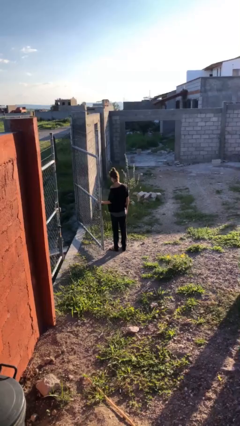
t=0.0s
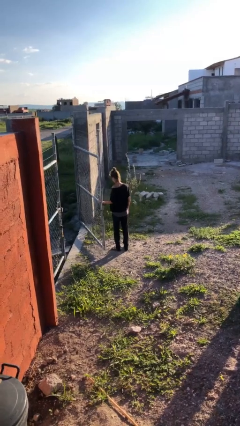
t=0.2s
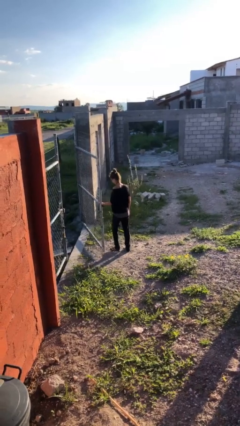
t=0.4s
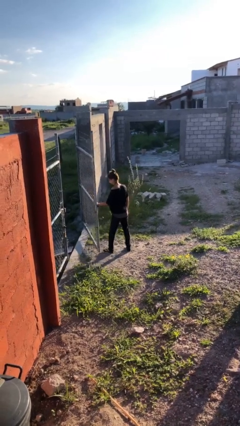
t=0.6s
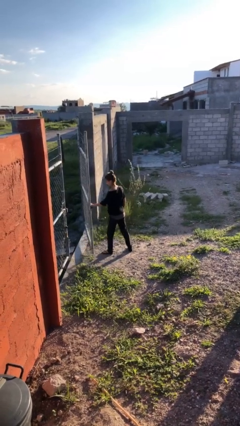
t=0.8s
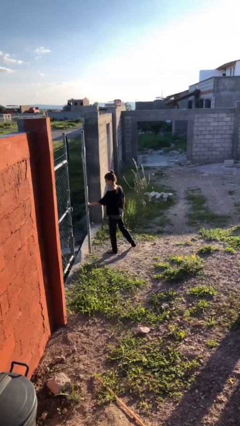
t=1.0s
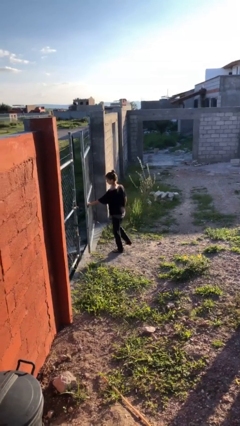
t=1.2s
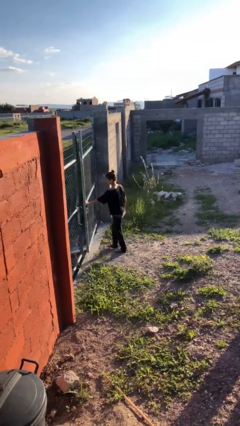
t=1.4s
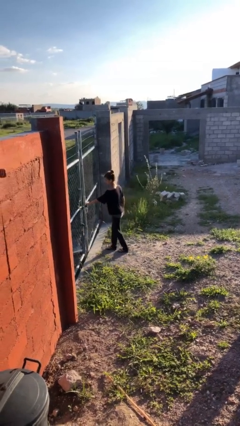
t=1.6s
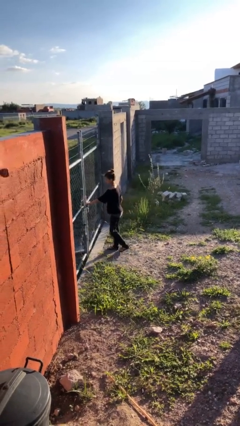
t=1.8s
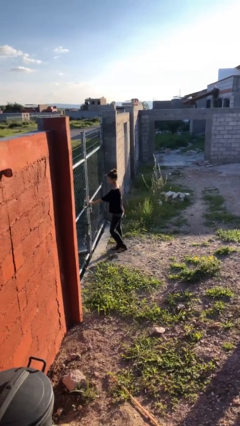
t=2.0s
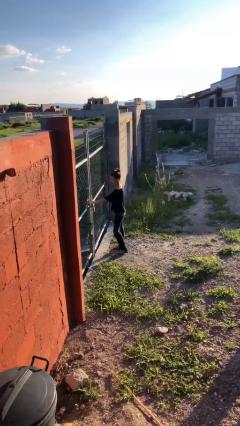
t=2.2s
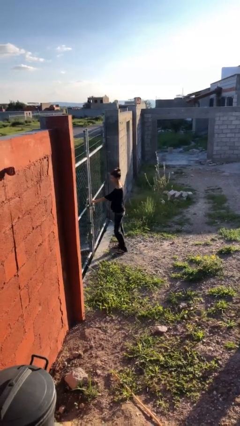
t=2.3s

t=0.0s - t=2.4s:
person closes gate

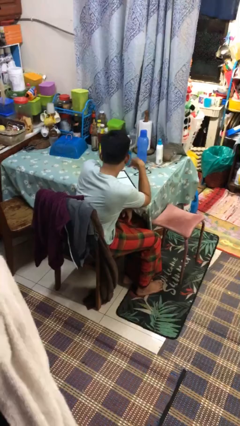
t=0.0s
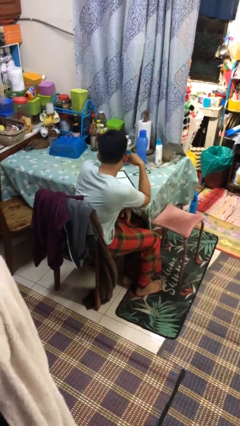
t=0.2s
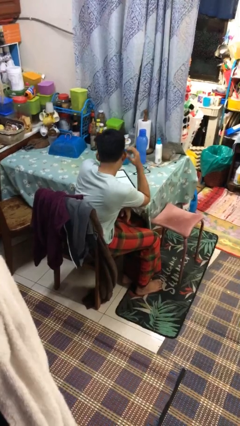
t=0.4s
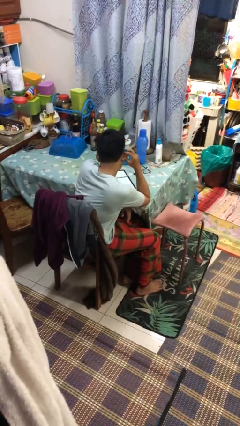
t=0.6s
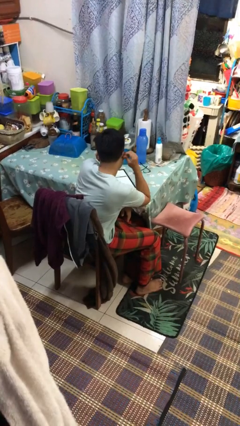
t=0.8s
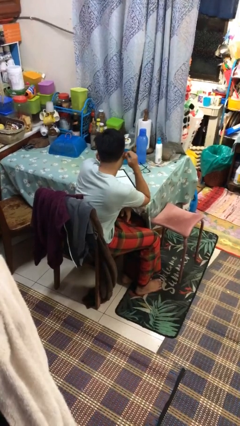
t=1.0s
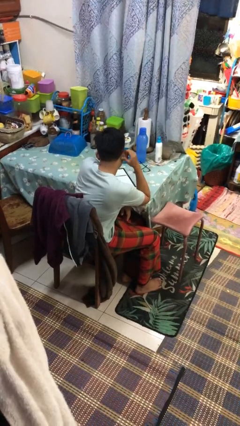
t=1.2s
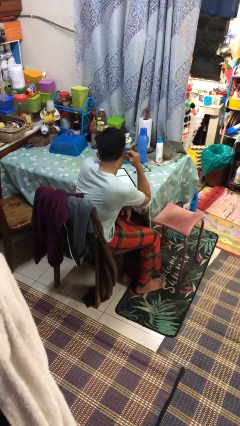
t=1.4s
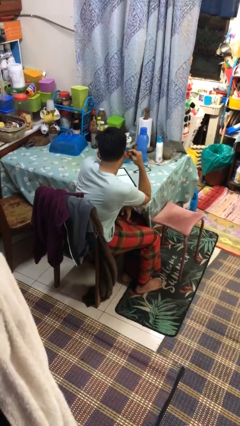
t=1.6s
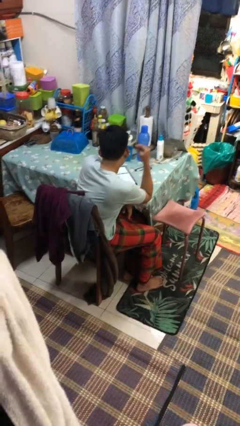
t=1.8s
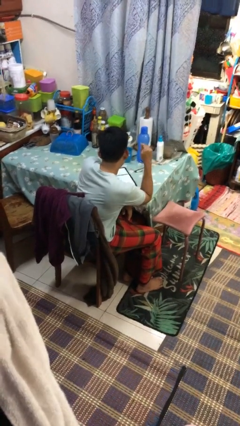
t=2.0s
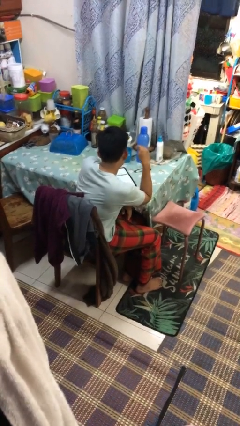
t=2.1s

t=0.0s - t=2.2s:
person touches earlobe

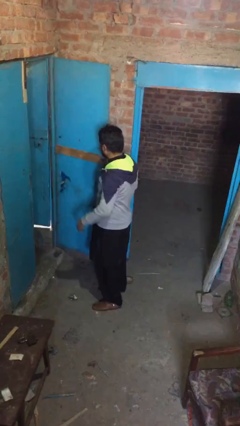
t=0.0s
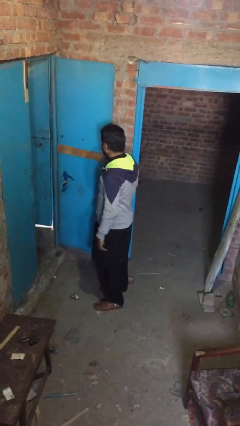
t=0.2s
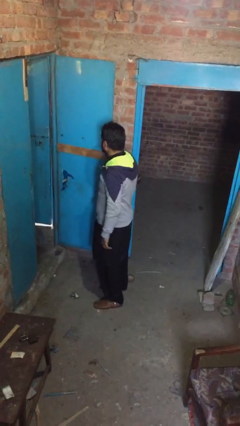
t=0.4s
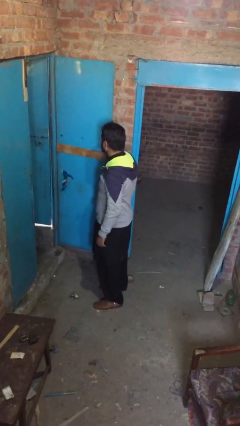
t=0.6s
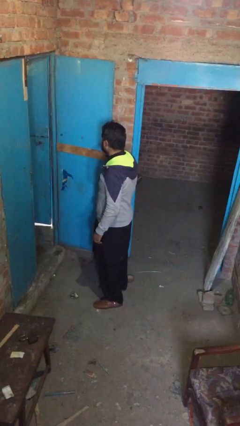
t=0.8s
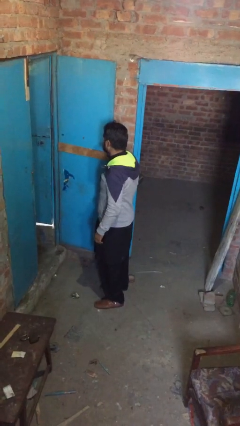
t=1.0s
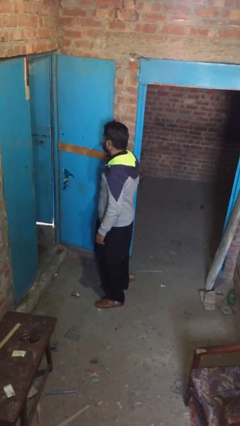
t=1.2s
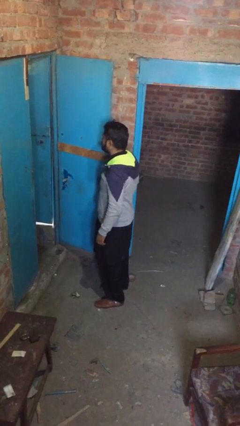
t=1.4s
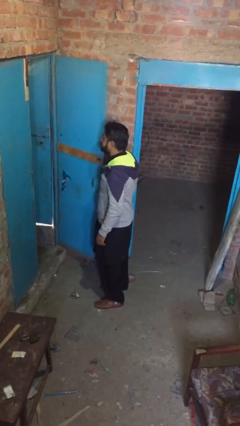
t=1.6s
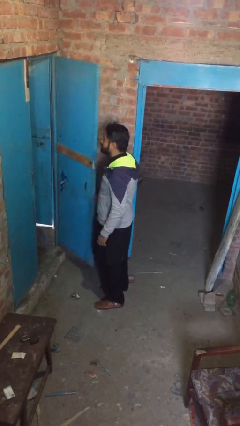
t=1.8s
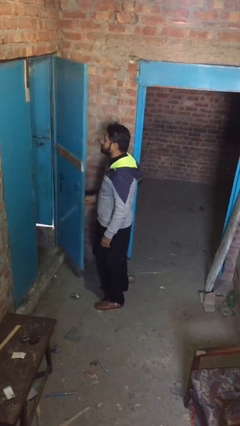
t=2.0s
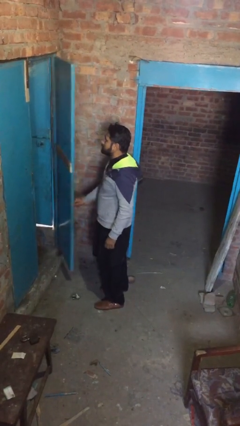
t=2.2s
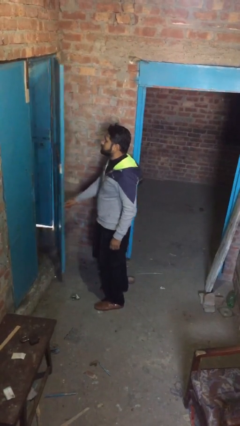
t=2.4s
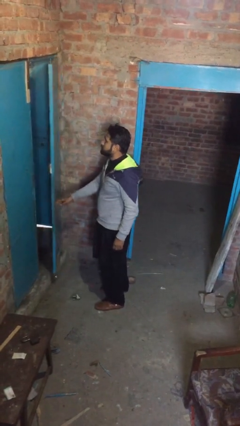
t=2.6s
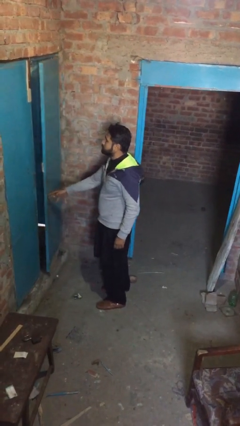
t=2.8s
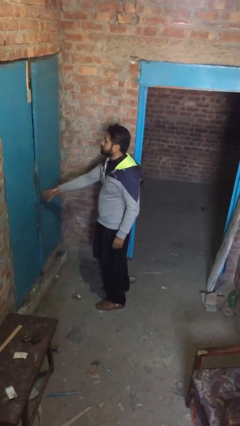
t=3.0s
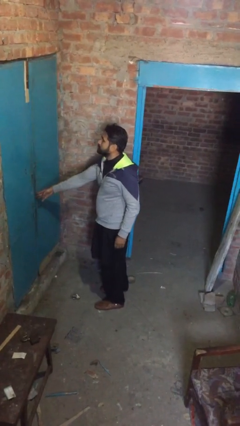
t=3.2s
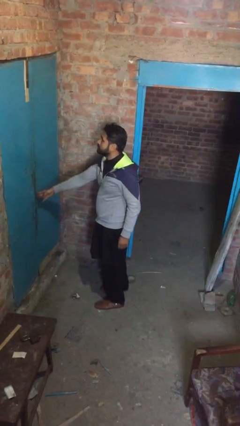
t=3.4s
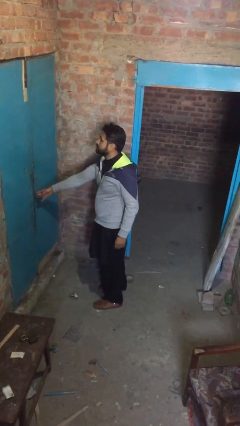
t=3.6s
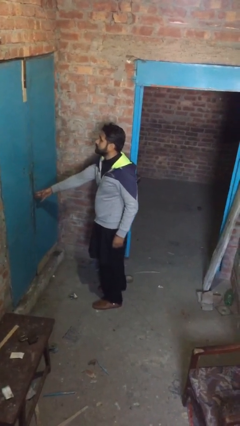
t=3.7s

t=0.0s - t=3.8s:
person closes facility door

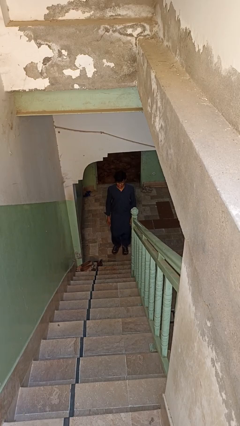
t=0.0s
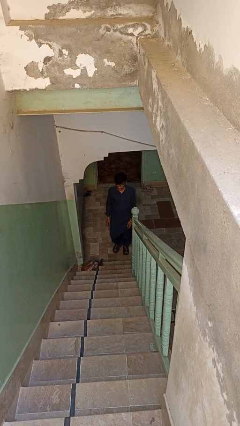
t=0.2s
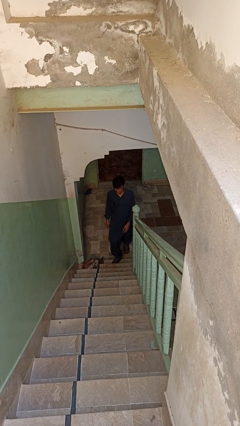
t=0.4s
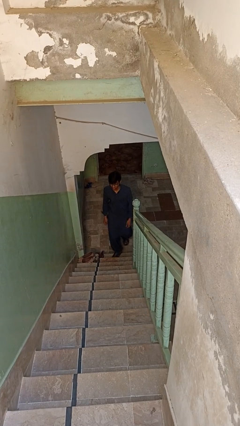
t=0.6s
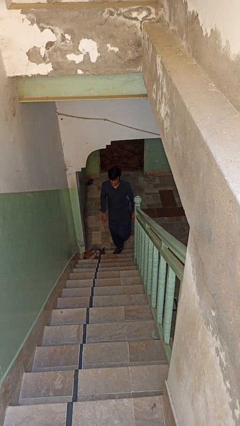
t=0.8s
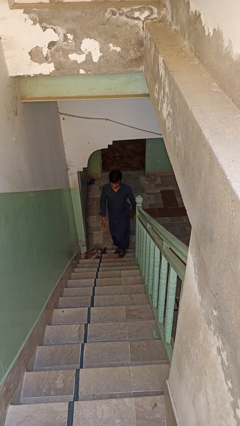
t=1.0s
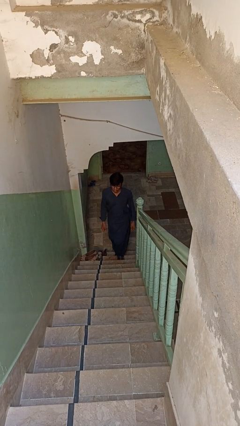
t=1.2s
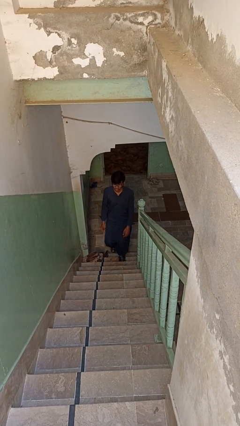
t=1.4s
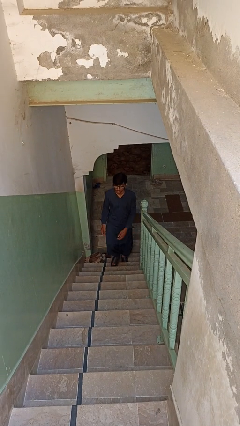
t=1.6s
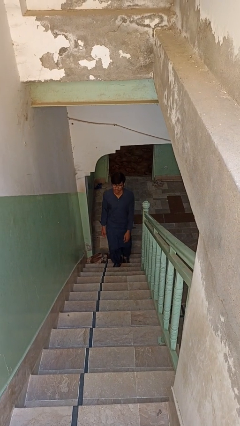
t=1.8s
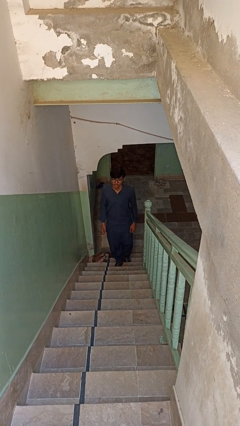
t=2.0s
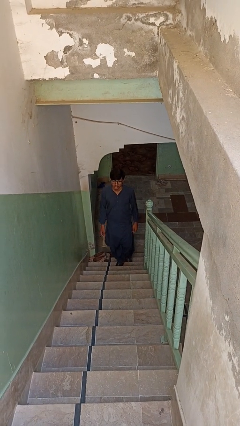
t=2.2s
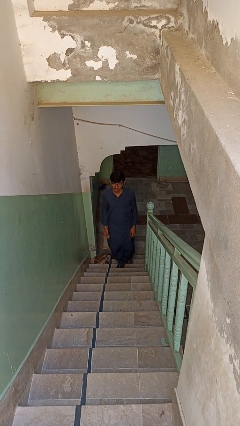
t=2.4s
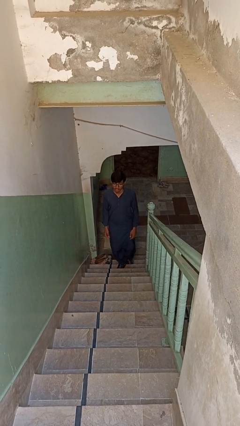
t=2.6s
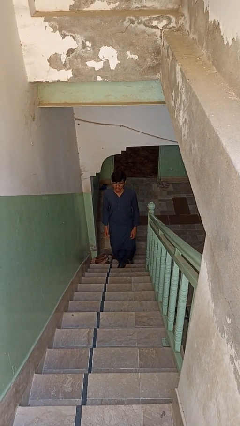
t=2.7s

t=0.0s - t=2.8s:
person climbs up stairs

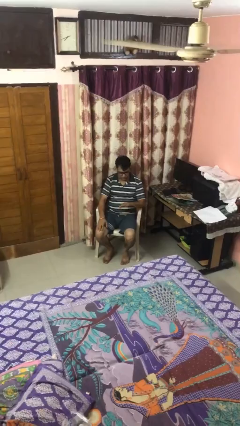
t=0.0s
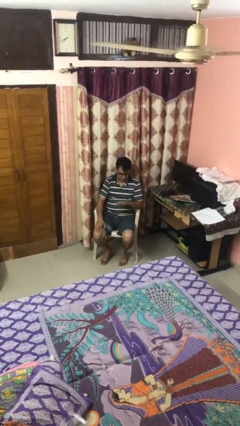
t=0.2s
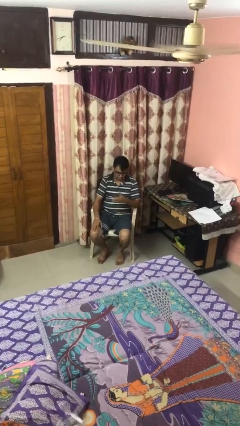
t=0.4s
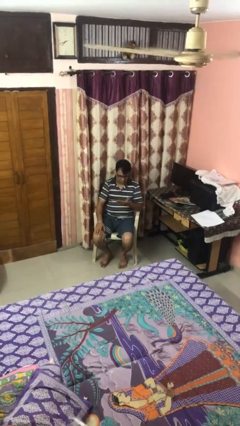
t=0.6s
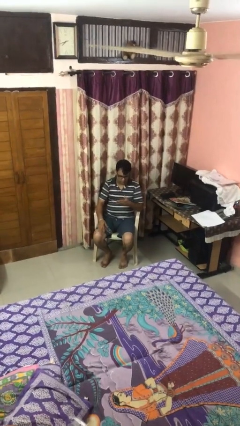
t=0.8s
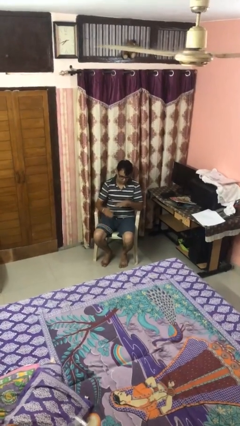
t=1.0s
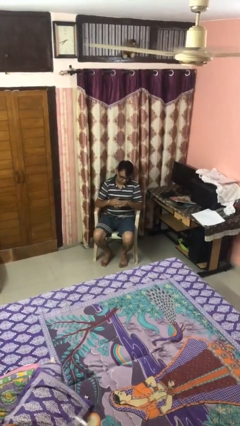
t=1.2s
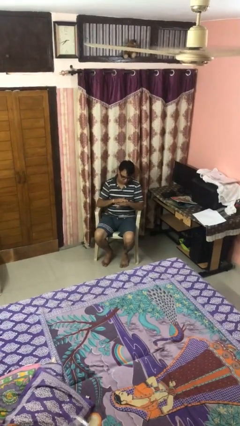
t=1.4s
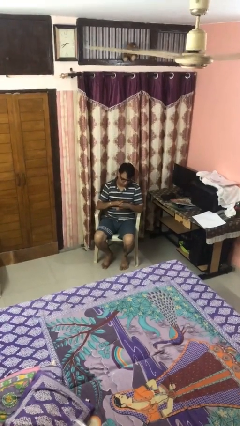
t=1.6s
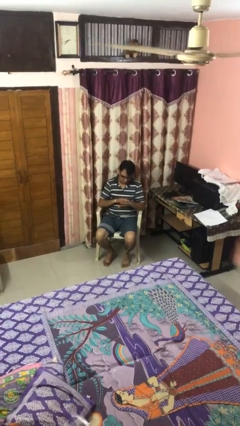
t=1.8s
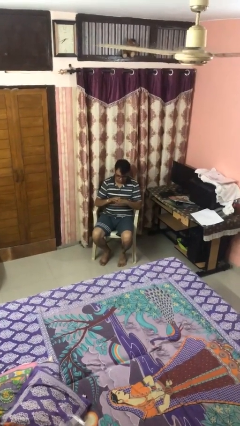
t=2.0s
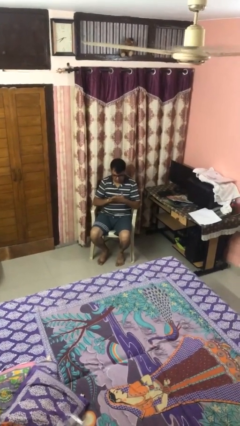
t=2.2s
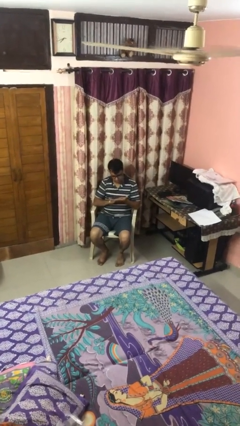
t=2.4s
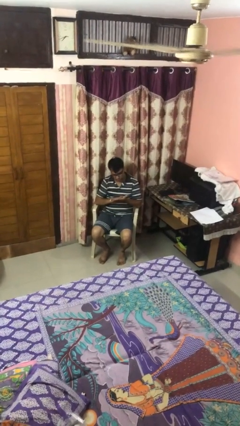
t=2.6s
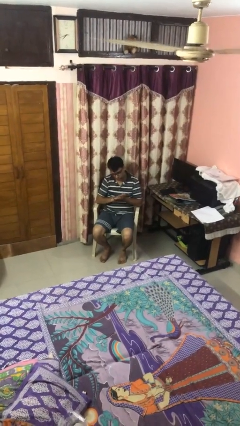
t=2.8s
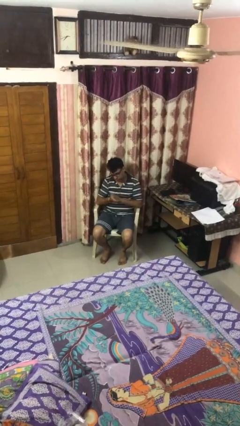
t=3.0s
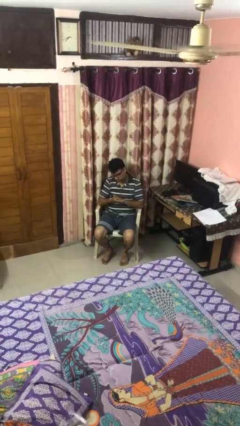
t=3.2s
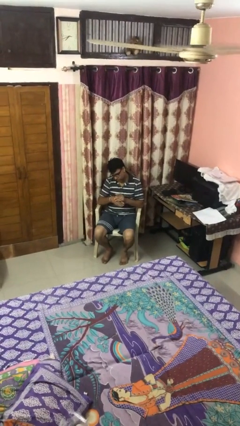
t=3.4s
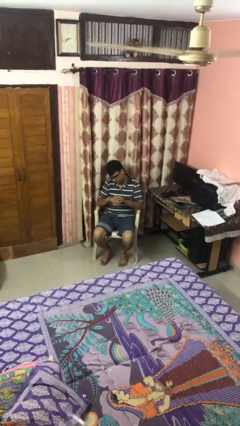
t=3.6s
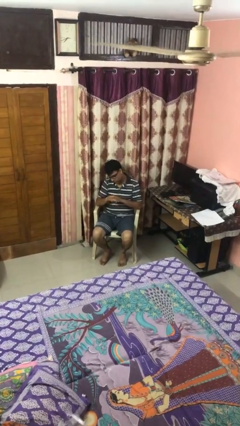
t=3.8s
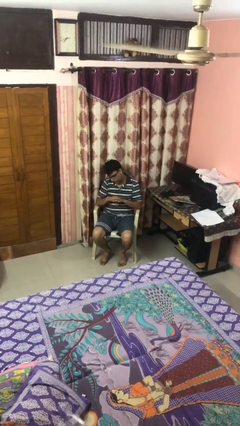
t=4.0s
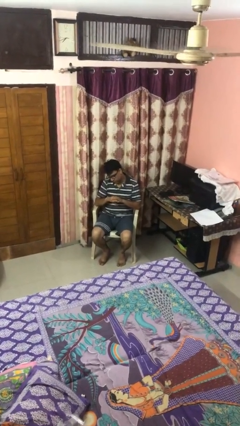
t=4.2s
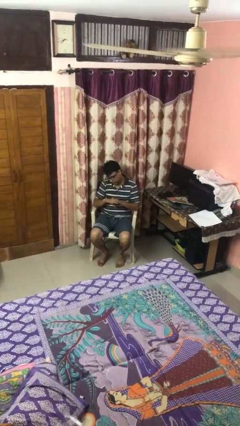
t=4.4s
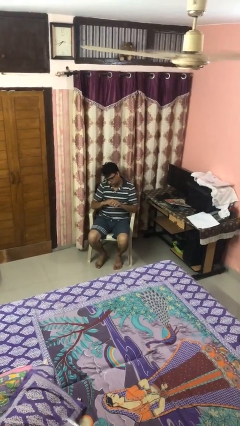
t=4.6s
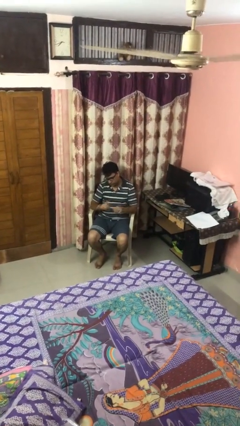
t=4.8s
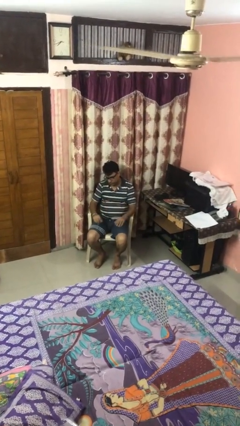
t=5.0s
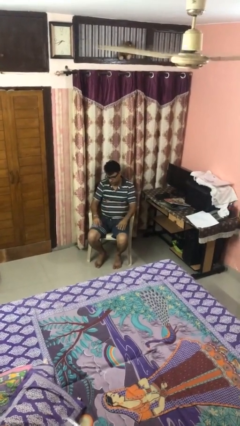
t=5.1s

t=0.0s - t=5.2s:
person looks at hands in lap

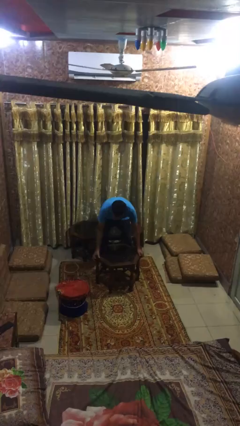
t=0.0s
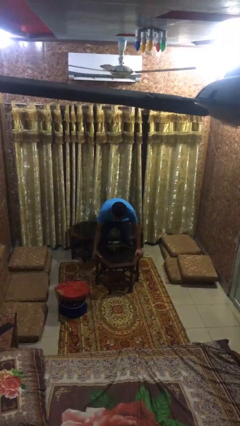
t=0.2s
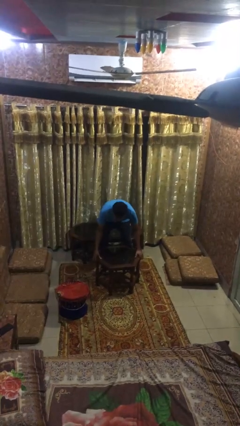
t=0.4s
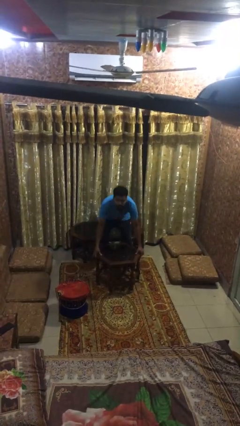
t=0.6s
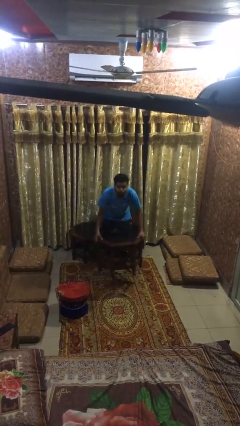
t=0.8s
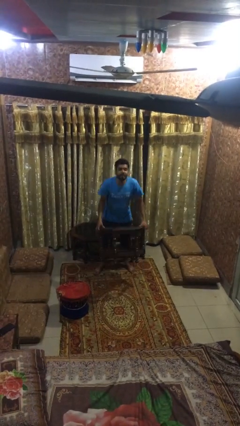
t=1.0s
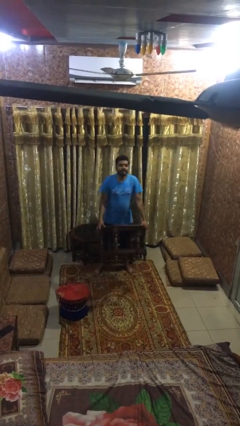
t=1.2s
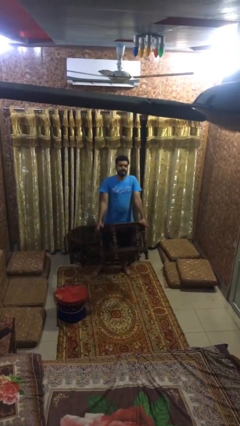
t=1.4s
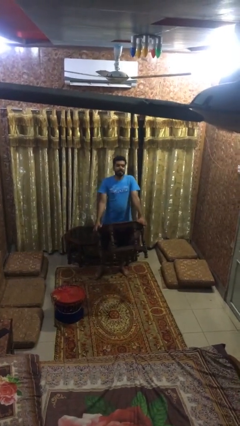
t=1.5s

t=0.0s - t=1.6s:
person picks up object from floor
